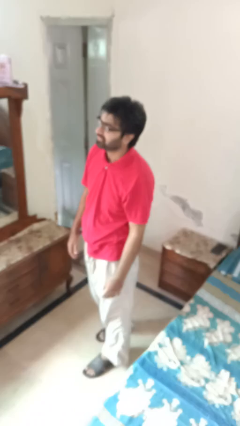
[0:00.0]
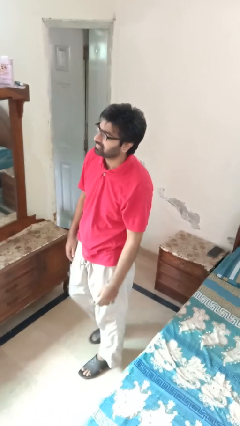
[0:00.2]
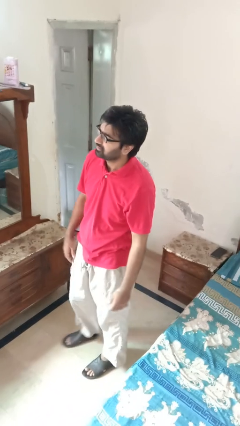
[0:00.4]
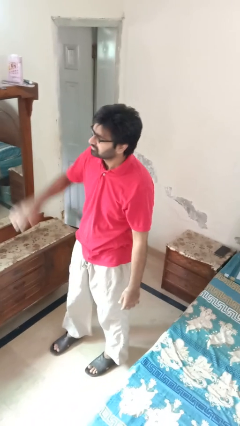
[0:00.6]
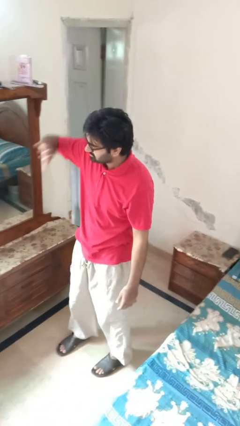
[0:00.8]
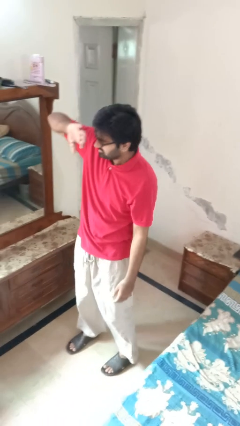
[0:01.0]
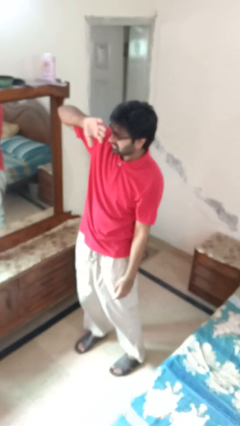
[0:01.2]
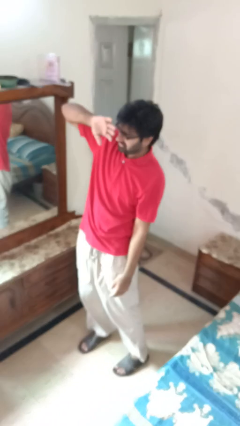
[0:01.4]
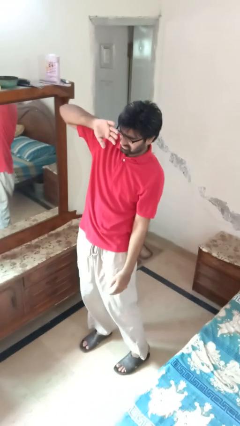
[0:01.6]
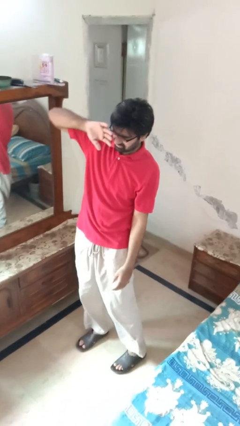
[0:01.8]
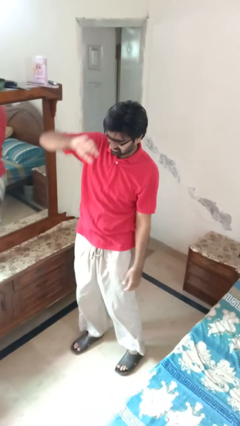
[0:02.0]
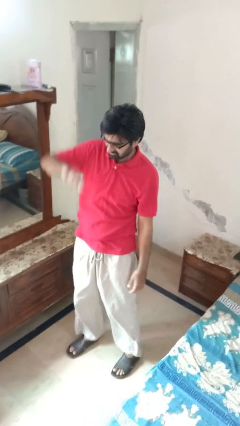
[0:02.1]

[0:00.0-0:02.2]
person shades eyes

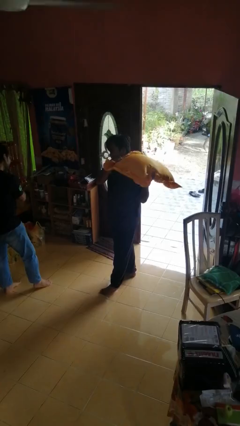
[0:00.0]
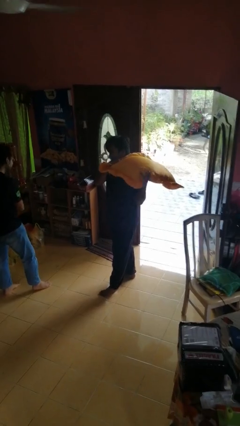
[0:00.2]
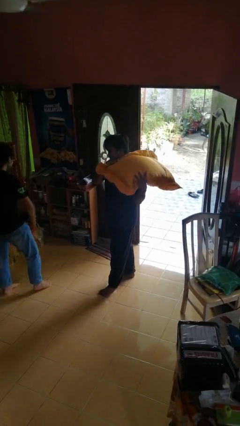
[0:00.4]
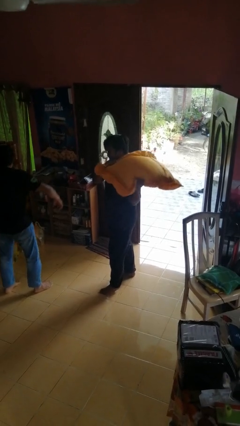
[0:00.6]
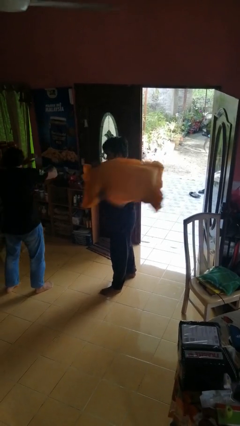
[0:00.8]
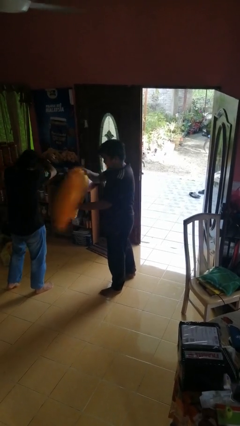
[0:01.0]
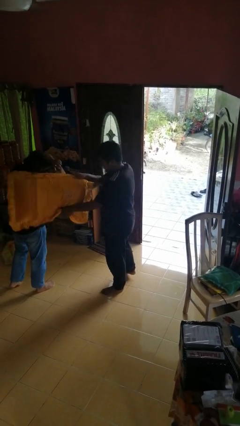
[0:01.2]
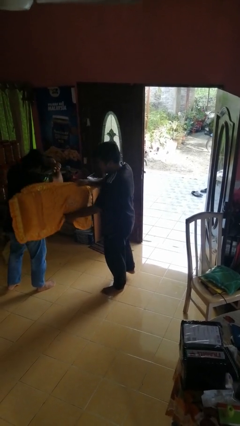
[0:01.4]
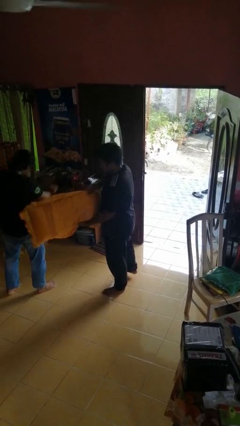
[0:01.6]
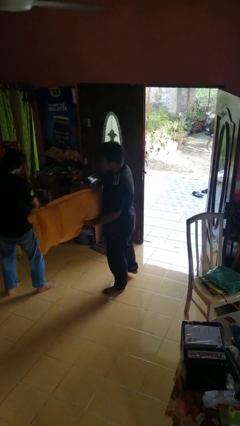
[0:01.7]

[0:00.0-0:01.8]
person hits person with pillow

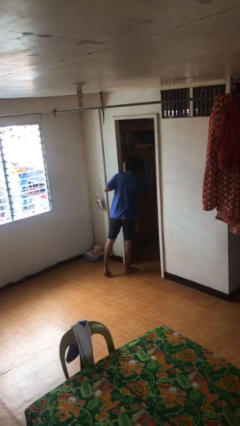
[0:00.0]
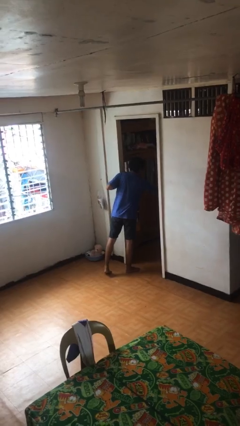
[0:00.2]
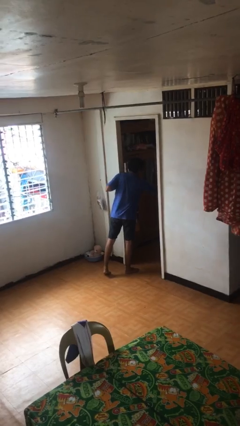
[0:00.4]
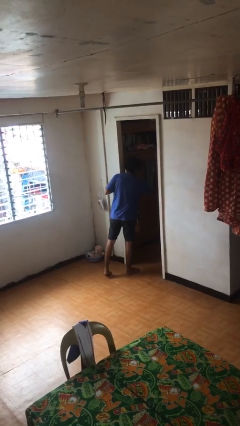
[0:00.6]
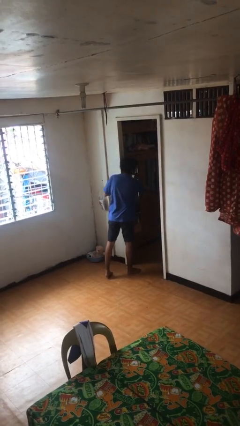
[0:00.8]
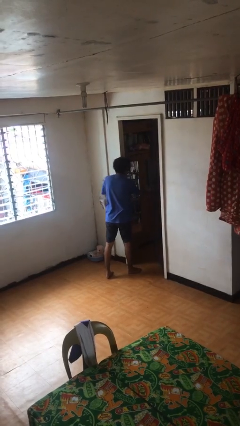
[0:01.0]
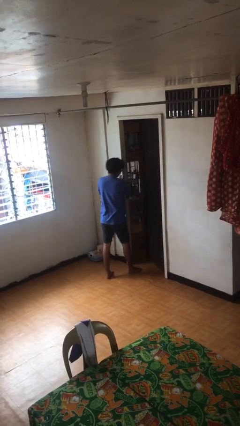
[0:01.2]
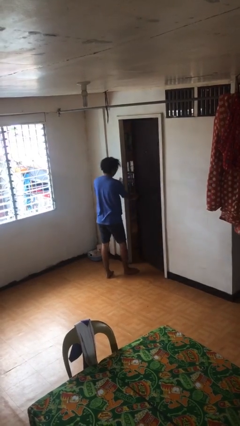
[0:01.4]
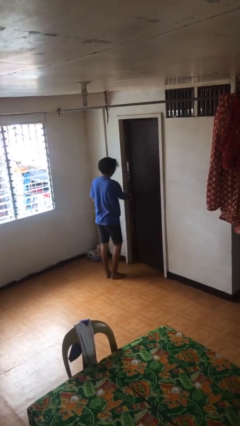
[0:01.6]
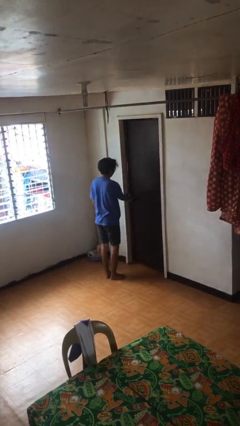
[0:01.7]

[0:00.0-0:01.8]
person closes facility door

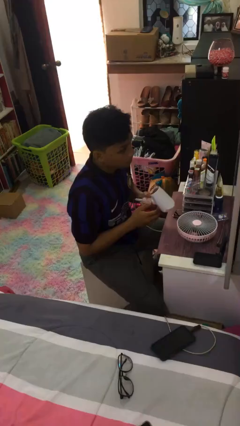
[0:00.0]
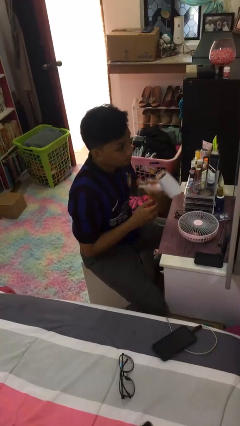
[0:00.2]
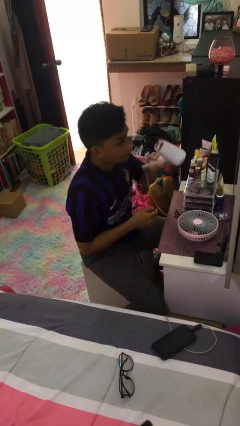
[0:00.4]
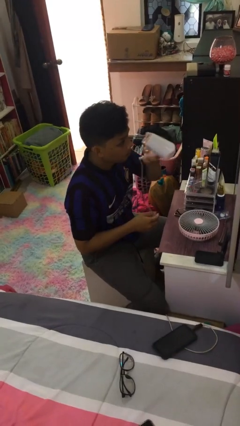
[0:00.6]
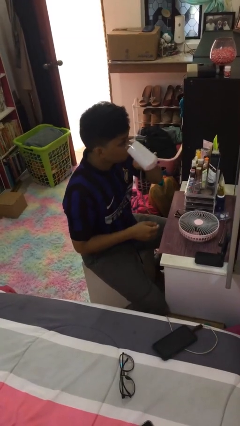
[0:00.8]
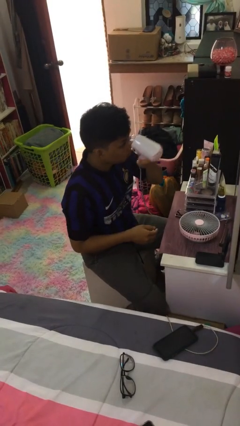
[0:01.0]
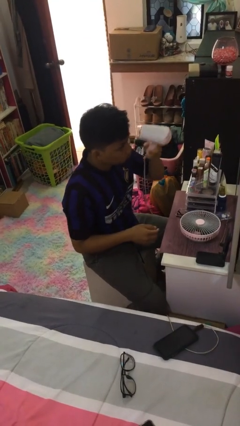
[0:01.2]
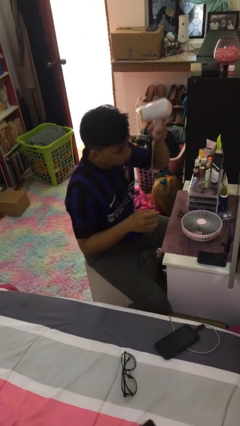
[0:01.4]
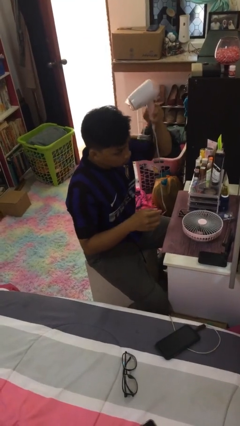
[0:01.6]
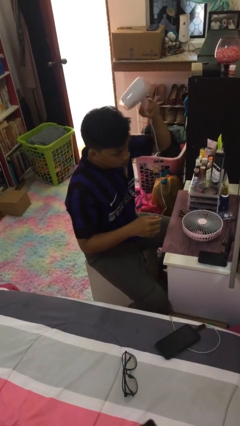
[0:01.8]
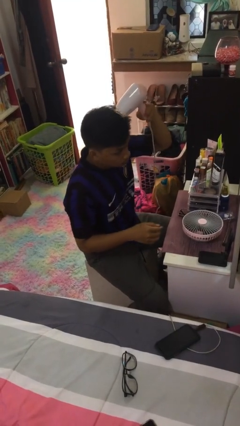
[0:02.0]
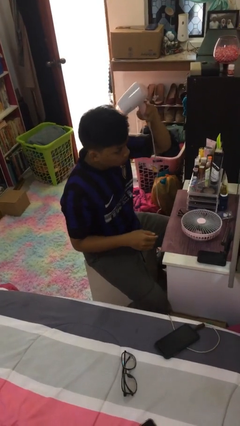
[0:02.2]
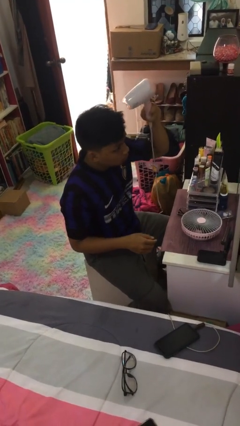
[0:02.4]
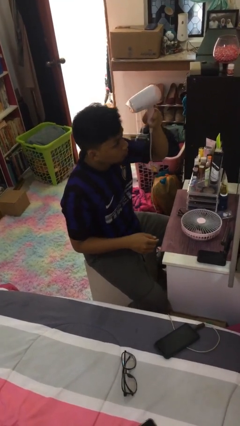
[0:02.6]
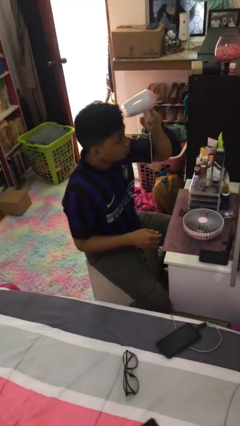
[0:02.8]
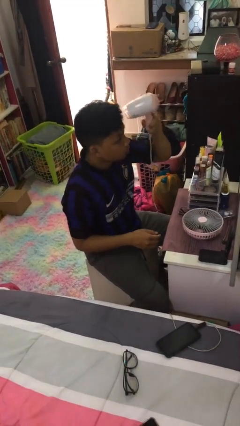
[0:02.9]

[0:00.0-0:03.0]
person dries hair with hairdryer

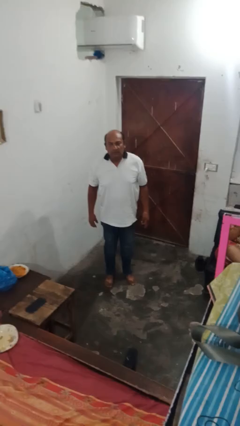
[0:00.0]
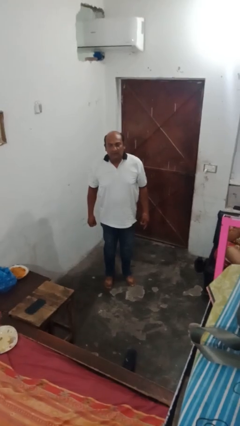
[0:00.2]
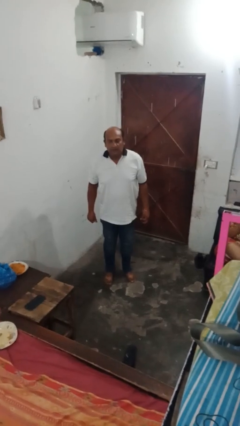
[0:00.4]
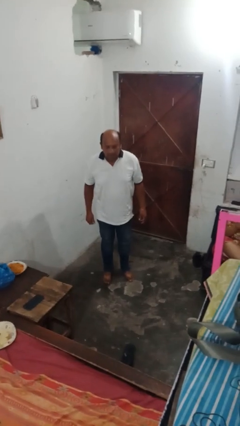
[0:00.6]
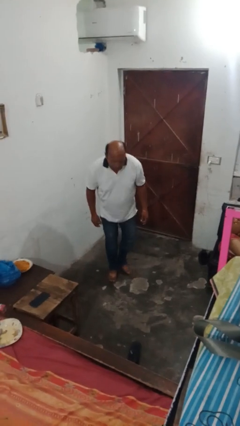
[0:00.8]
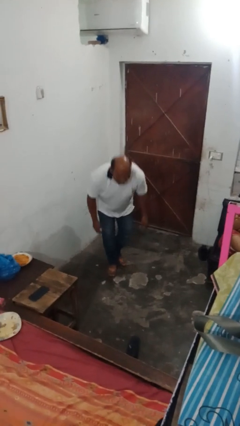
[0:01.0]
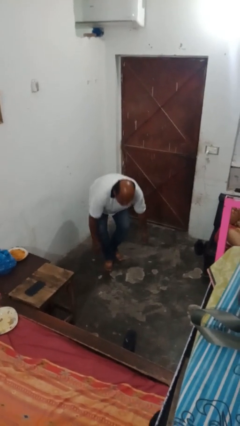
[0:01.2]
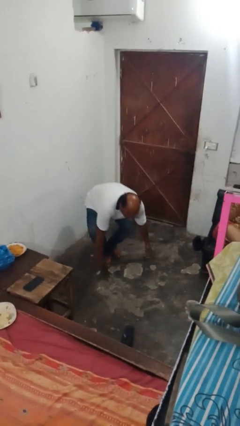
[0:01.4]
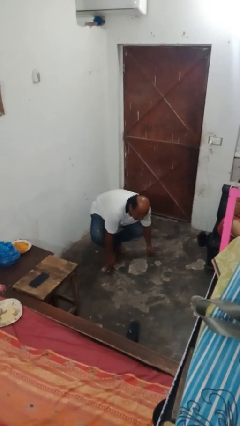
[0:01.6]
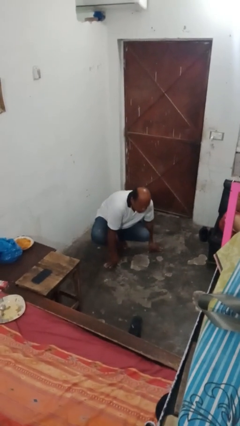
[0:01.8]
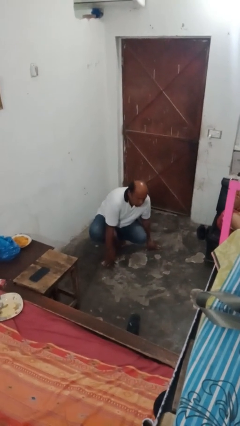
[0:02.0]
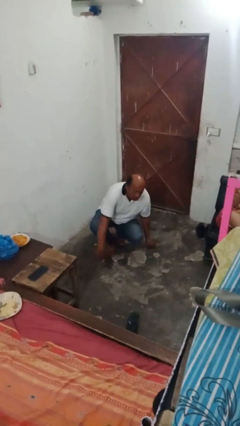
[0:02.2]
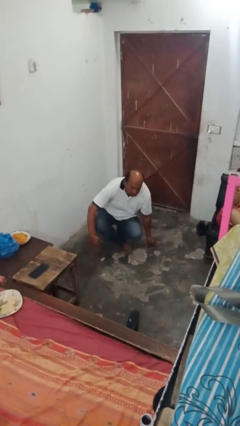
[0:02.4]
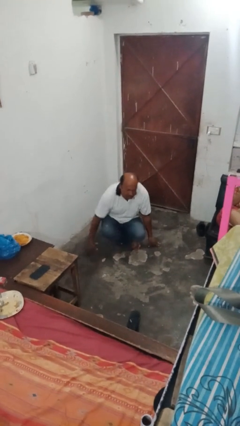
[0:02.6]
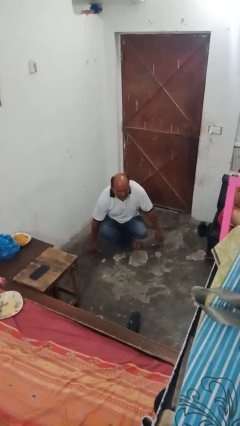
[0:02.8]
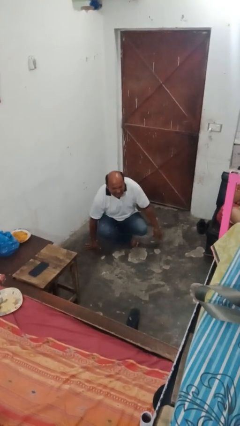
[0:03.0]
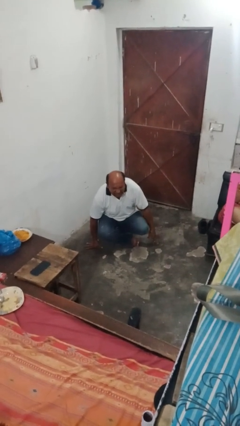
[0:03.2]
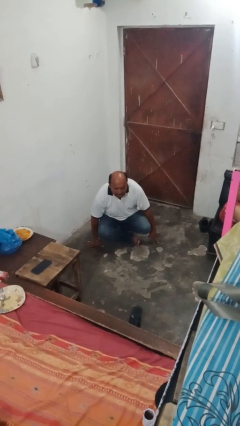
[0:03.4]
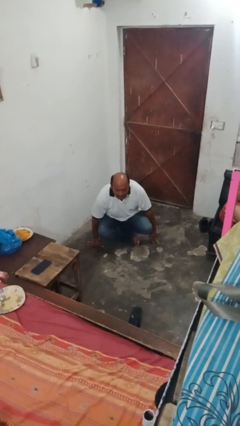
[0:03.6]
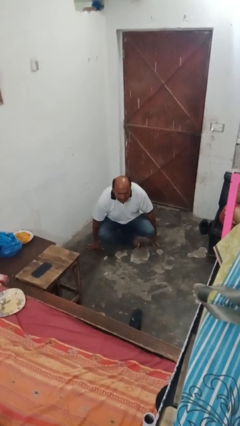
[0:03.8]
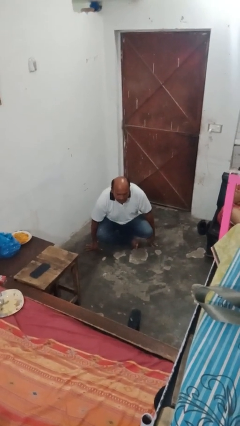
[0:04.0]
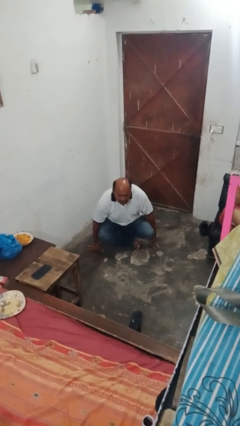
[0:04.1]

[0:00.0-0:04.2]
person sits crisscross

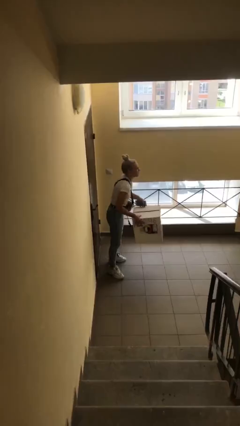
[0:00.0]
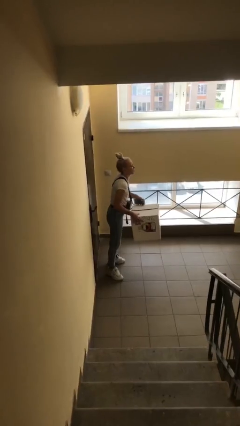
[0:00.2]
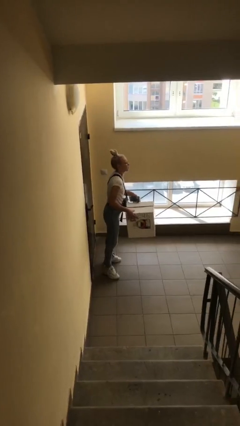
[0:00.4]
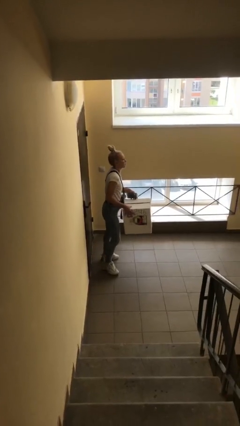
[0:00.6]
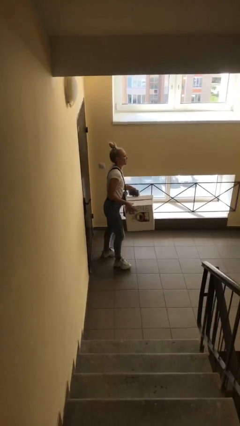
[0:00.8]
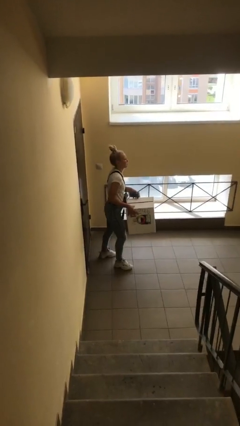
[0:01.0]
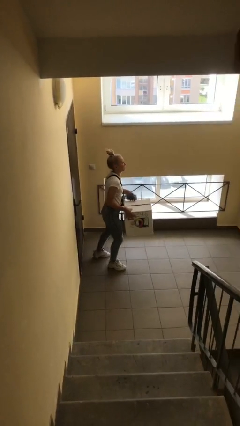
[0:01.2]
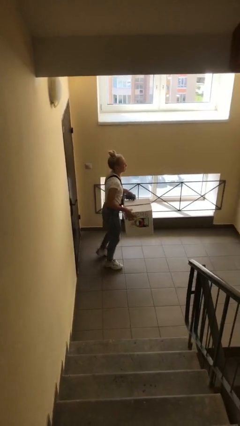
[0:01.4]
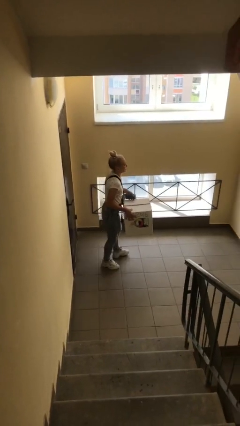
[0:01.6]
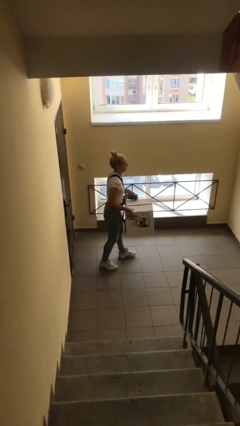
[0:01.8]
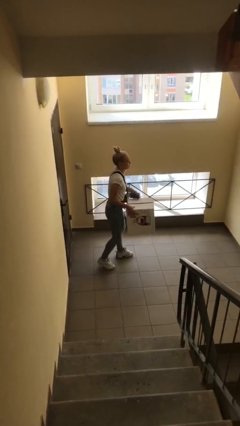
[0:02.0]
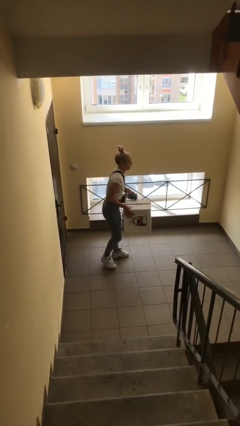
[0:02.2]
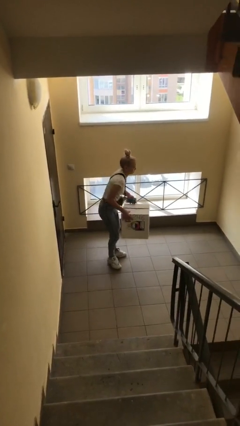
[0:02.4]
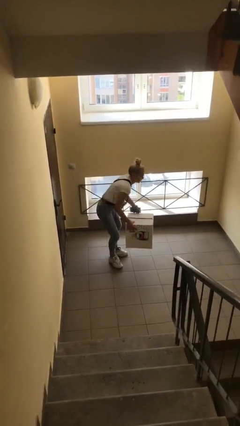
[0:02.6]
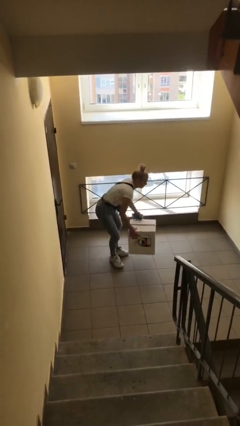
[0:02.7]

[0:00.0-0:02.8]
person carries heavy object

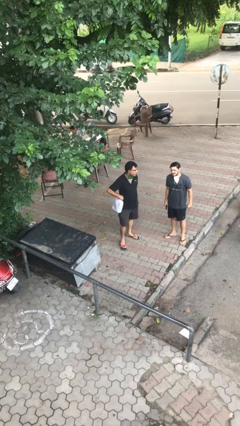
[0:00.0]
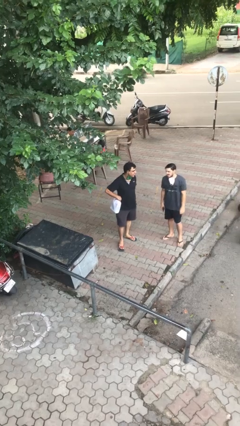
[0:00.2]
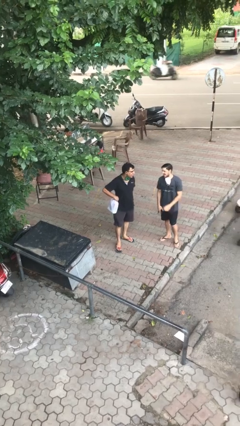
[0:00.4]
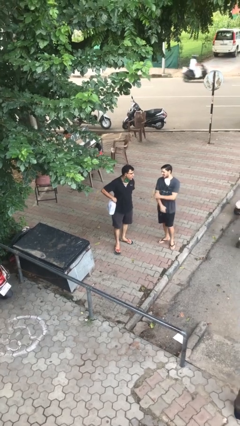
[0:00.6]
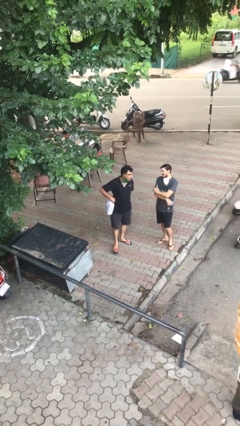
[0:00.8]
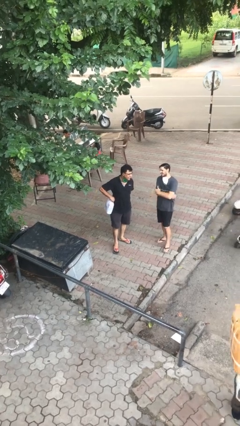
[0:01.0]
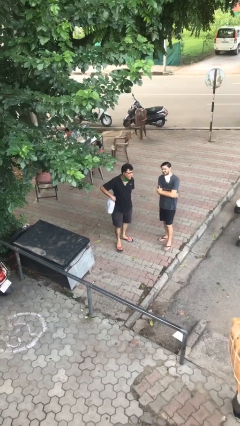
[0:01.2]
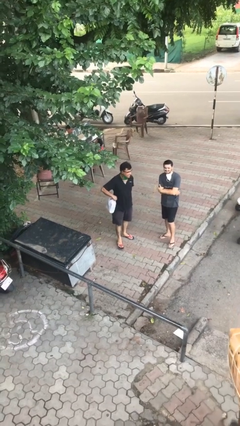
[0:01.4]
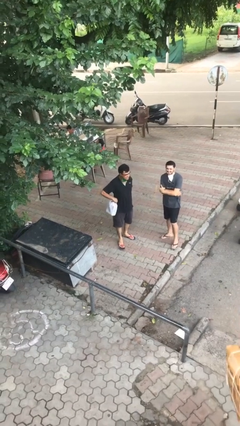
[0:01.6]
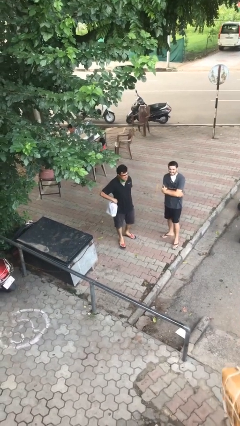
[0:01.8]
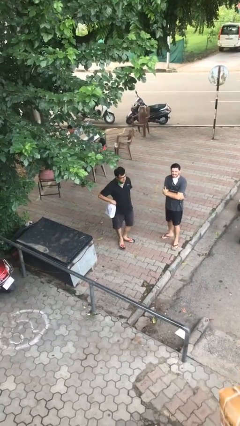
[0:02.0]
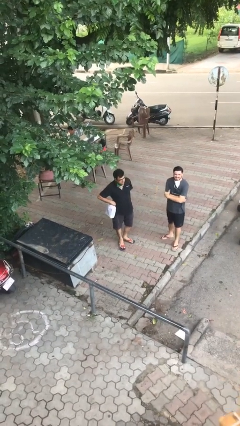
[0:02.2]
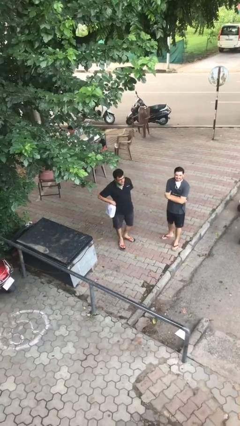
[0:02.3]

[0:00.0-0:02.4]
person laughs with person
